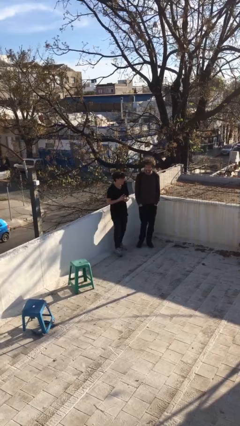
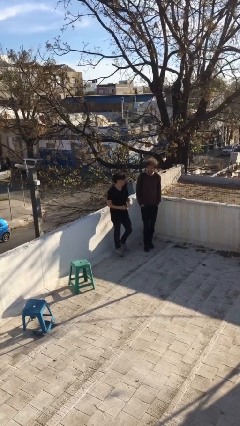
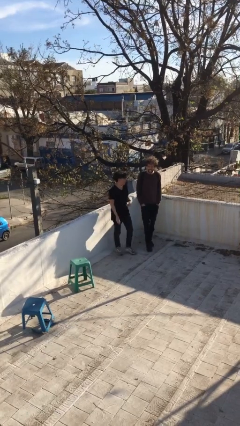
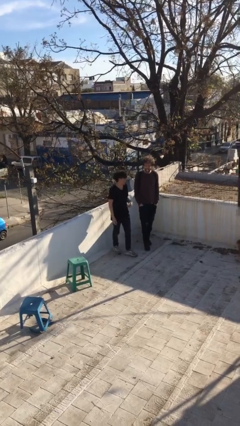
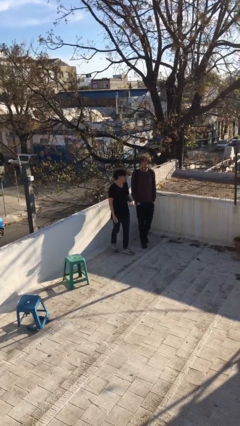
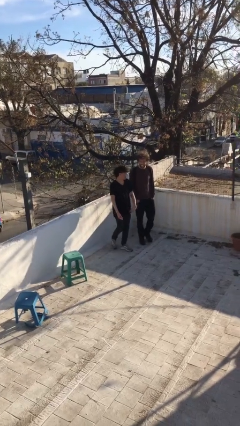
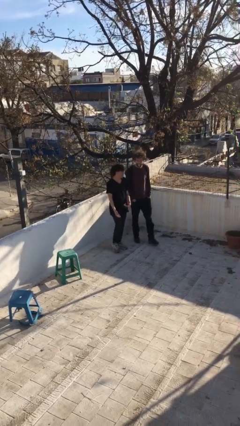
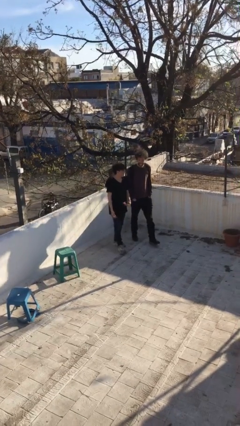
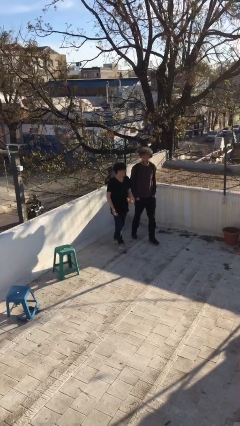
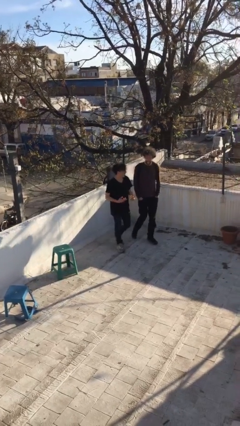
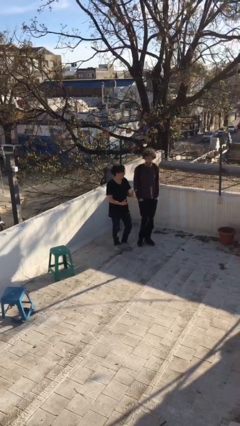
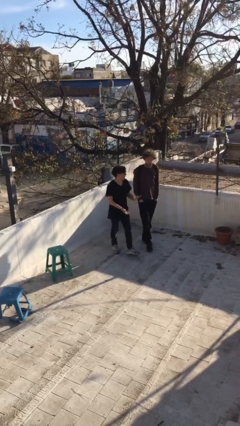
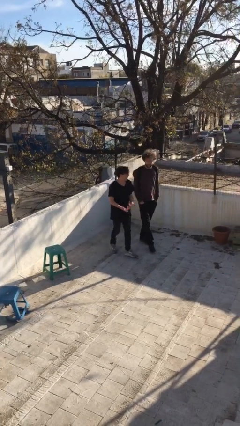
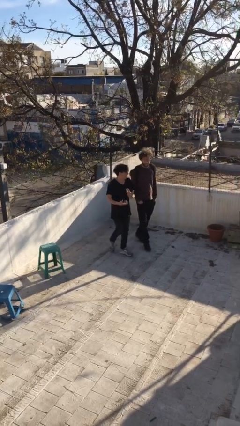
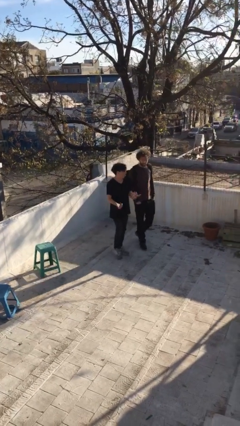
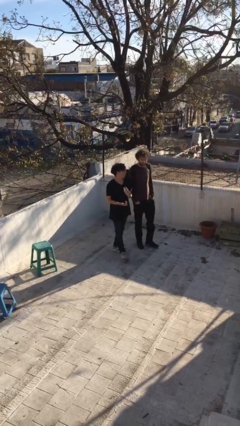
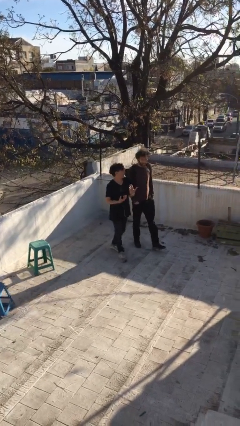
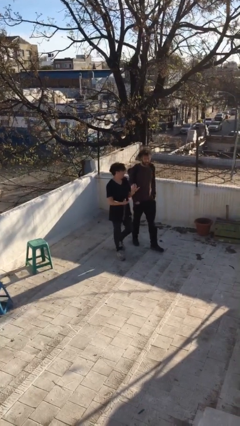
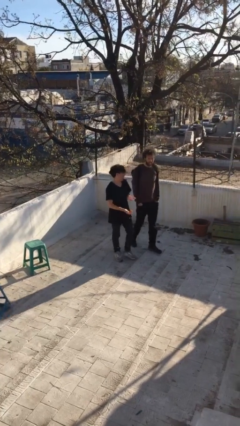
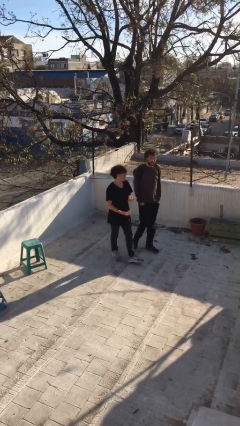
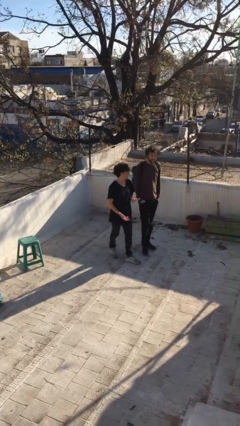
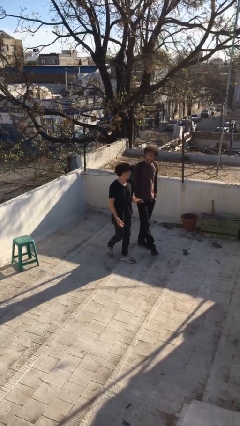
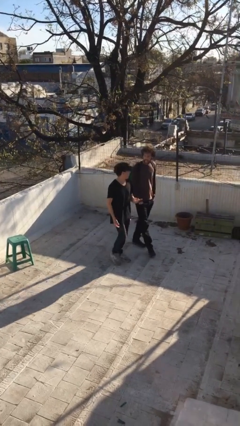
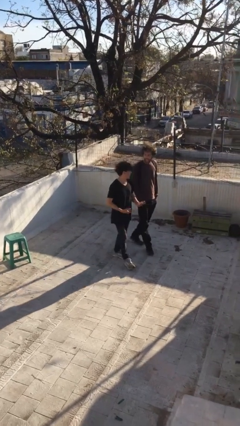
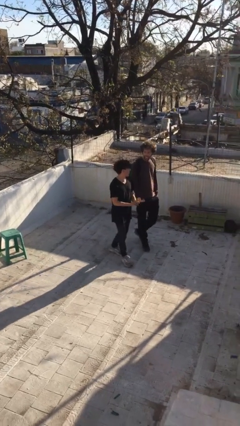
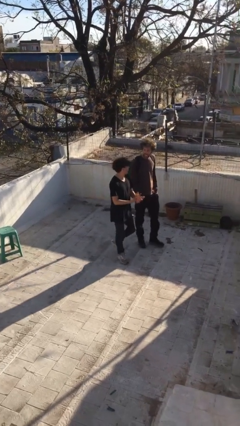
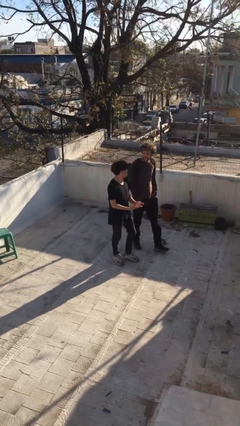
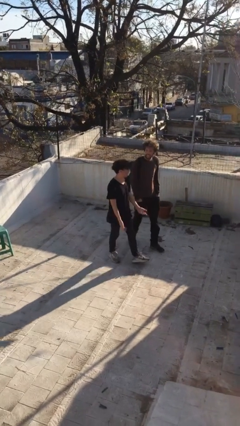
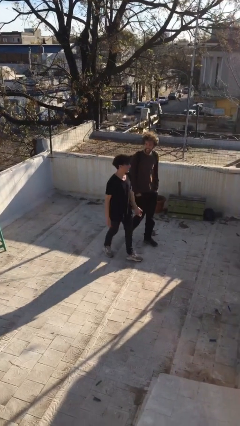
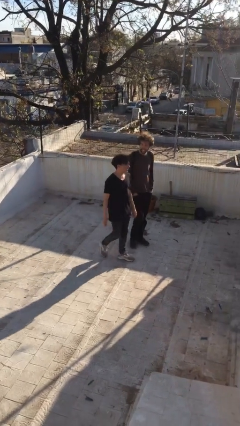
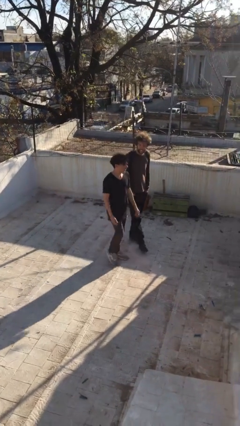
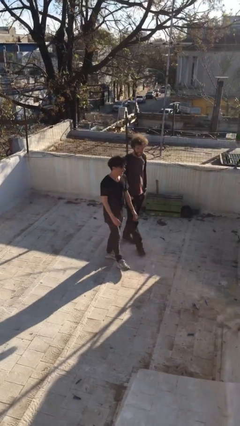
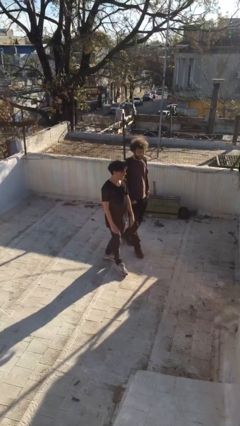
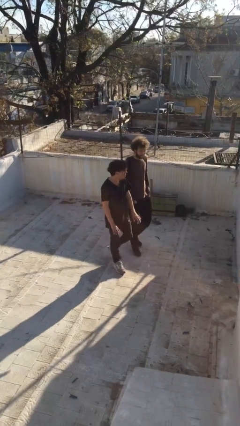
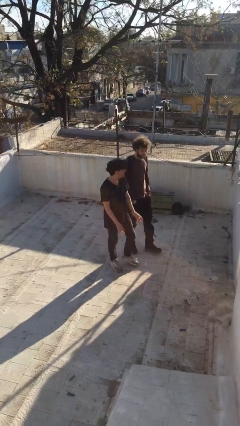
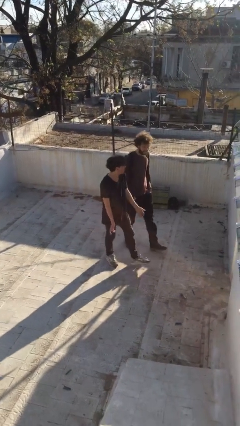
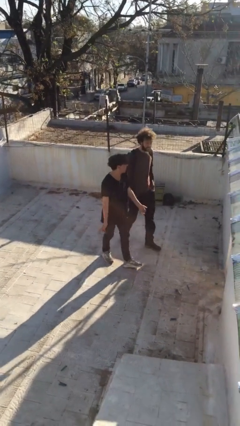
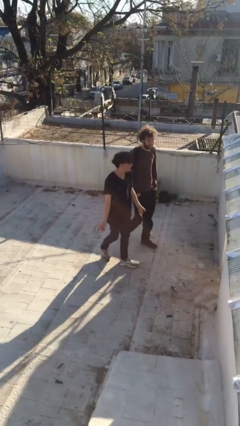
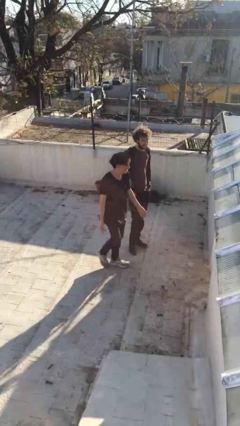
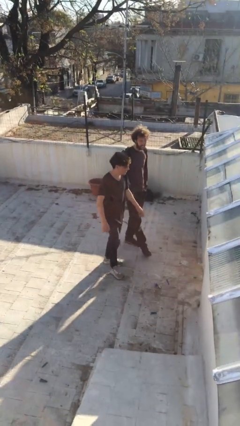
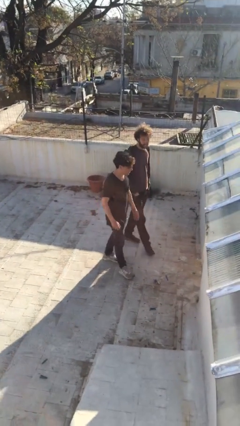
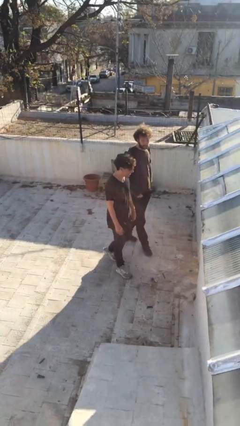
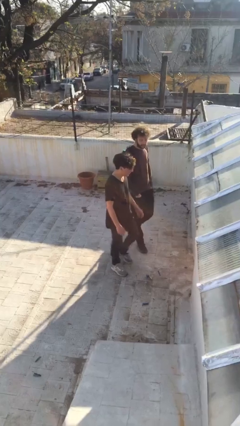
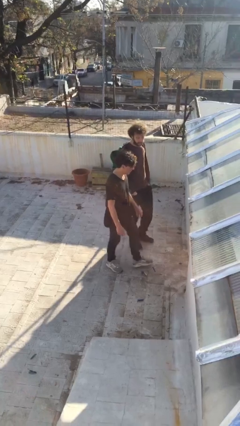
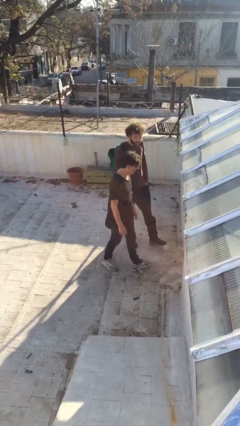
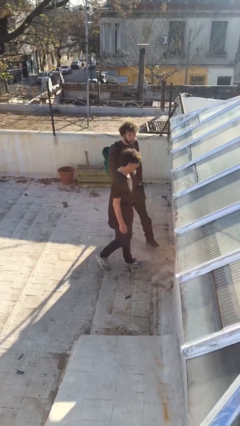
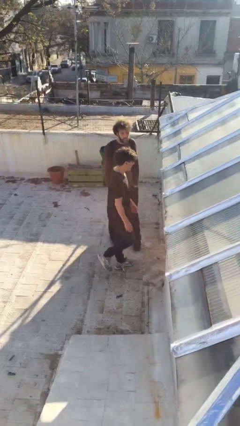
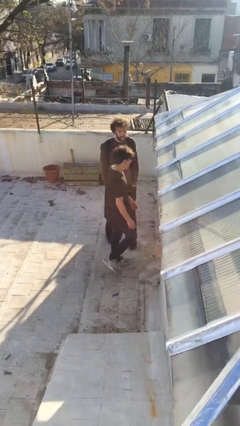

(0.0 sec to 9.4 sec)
person talks to person

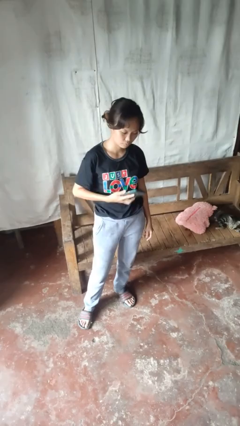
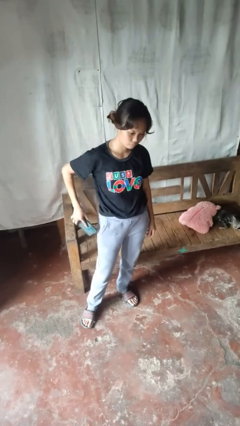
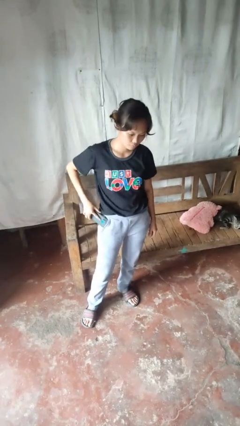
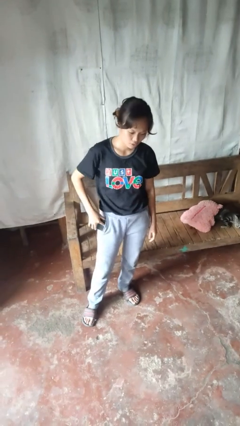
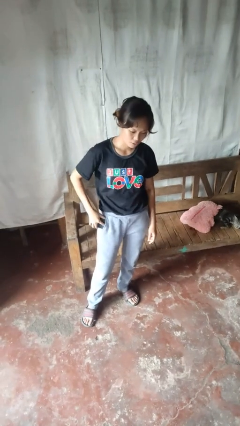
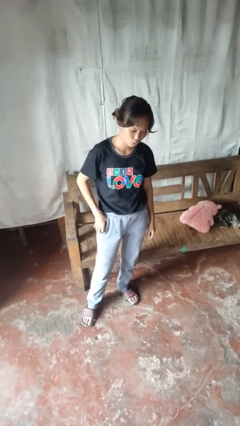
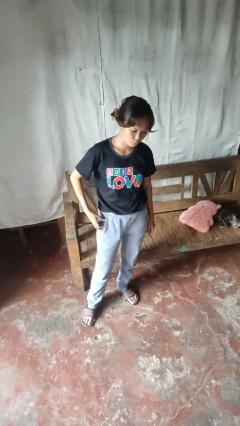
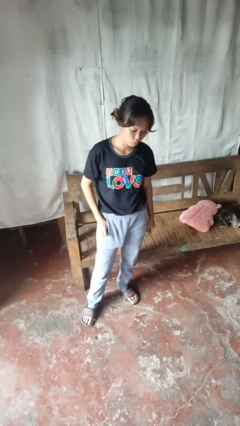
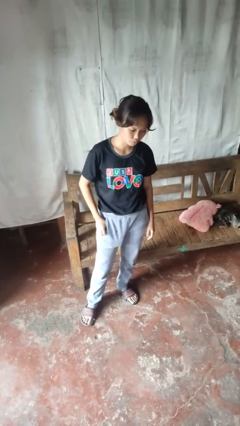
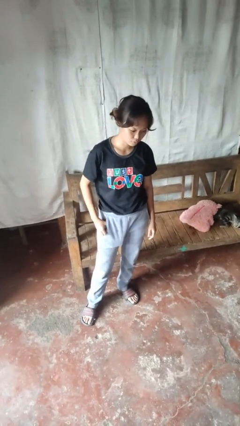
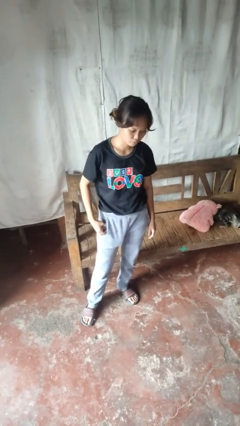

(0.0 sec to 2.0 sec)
person puts phone into pocket

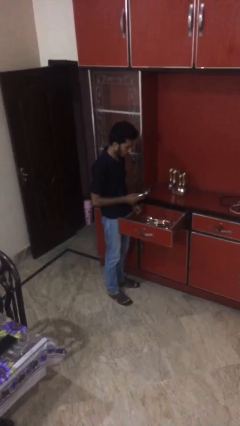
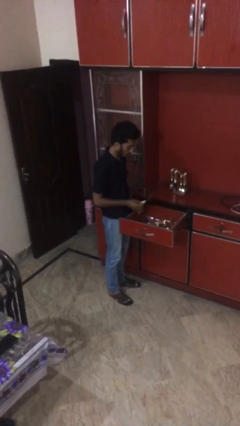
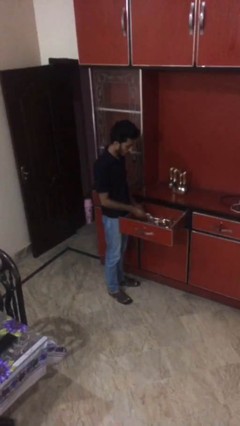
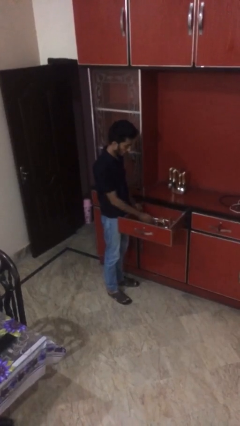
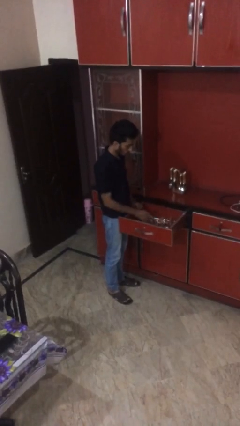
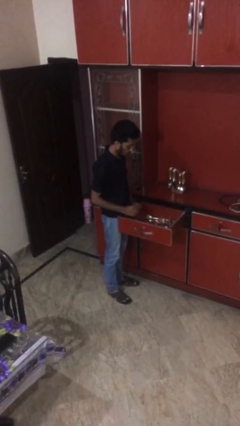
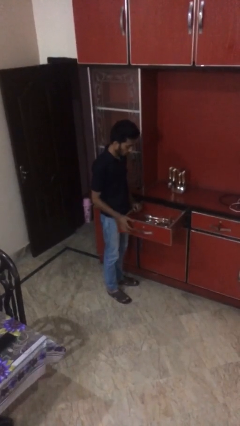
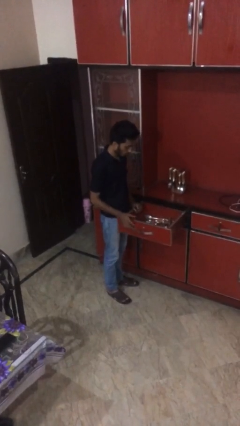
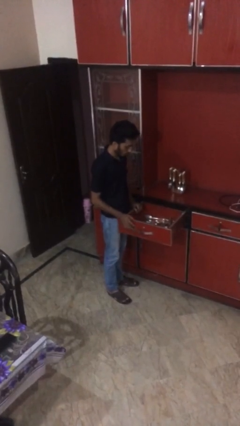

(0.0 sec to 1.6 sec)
person puts object into kitchen drawer

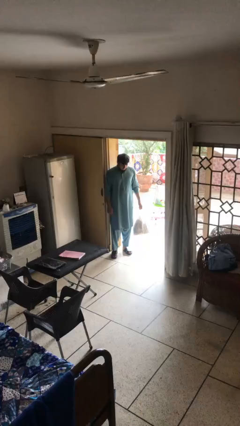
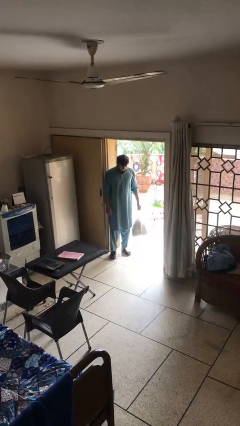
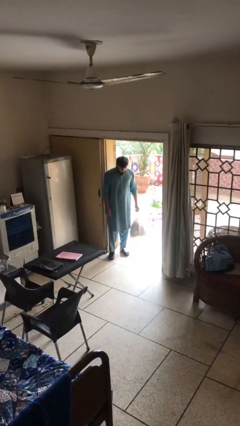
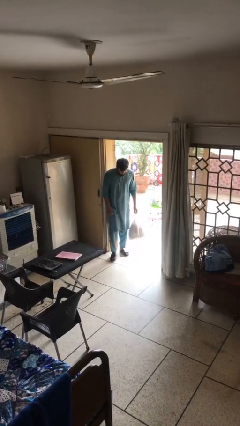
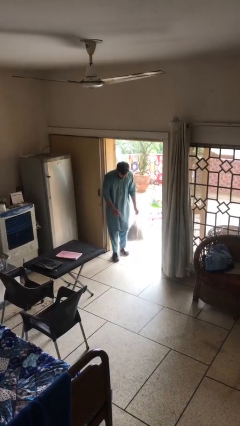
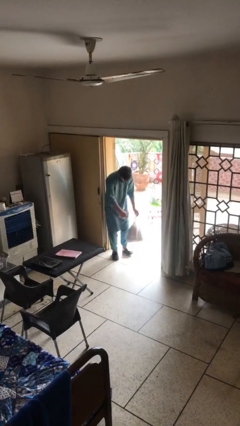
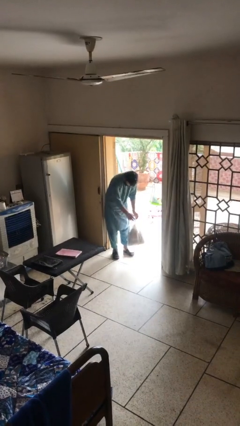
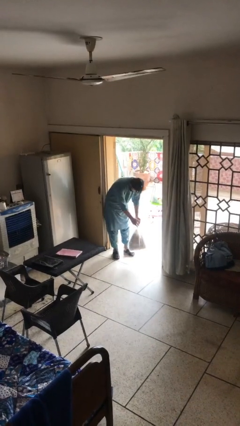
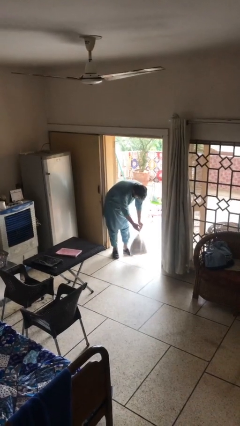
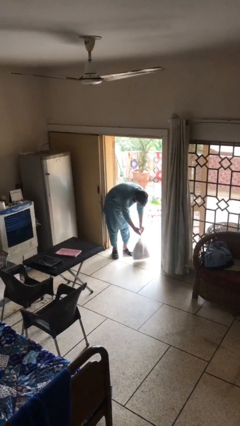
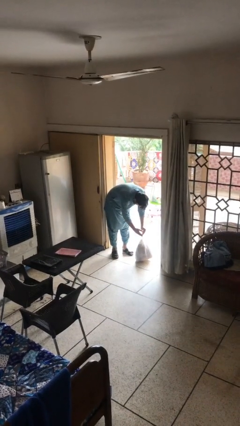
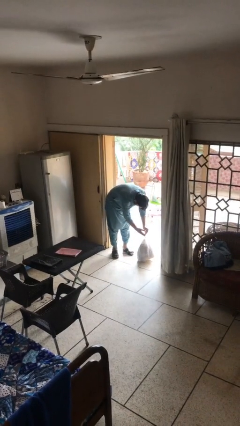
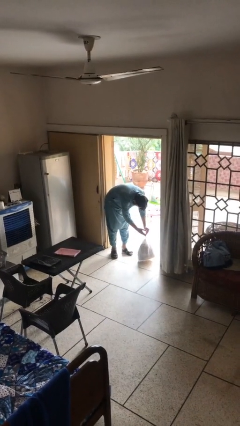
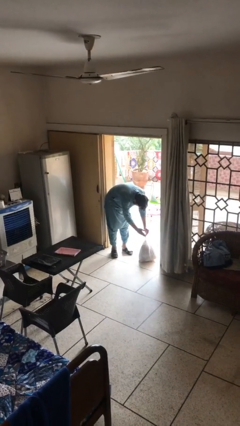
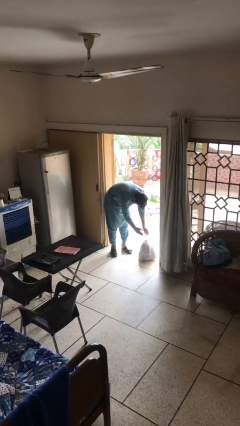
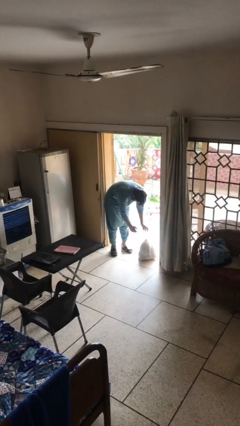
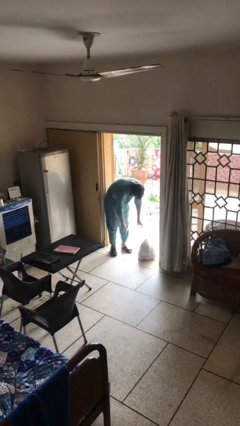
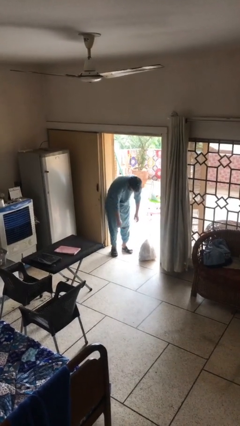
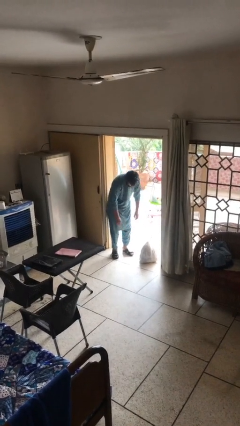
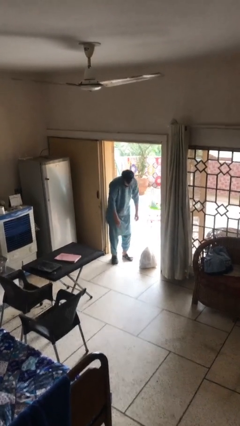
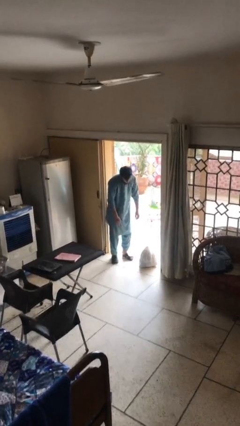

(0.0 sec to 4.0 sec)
person puts down object on floor

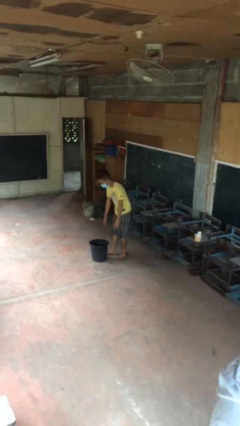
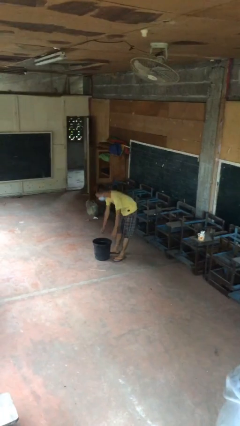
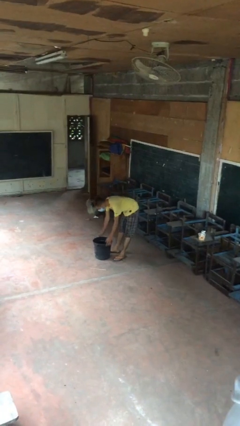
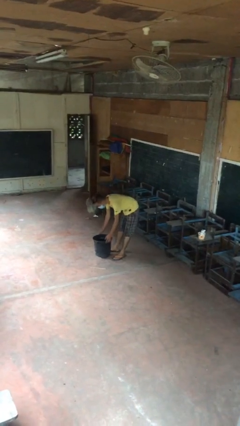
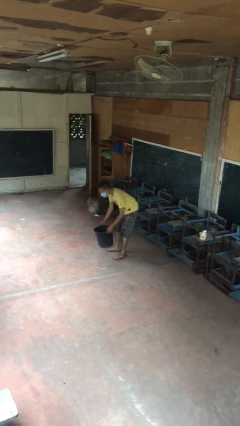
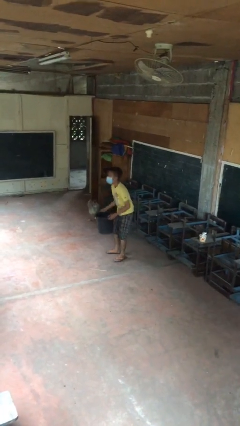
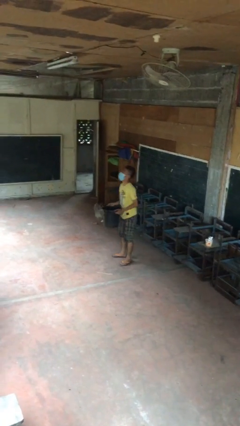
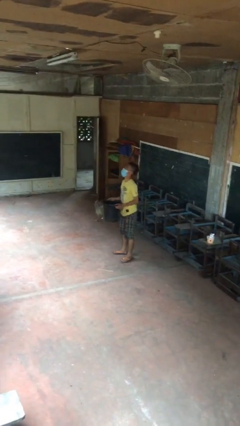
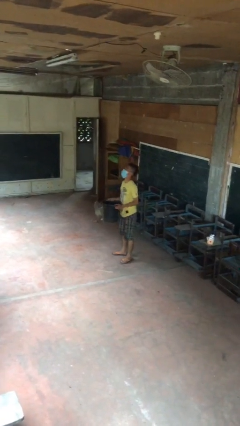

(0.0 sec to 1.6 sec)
person picks up object from floor
